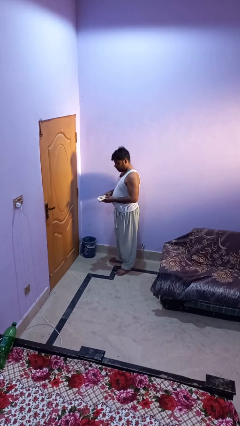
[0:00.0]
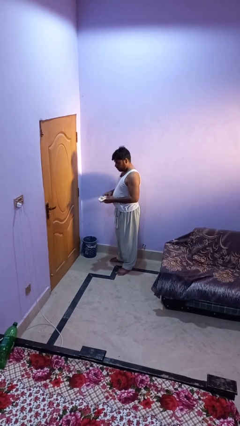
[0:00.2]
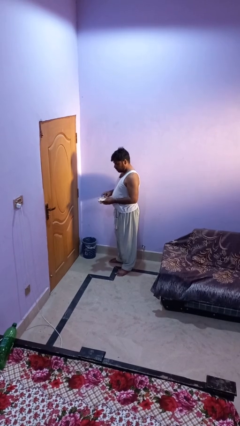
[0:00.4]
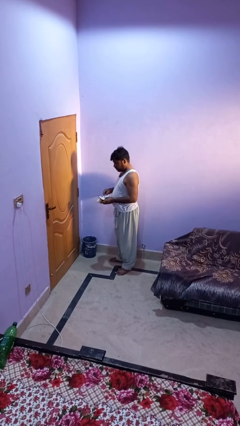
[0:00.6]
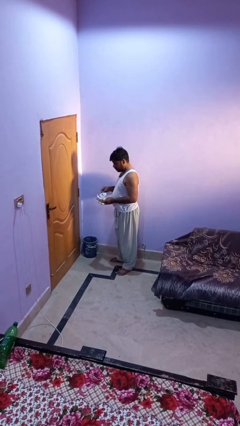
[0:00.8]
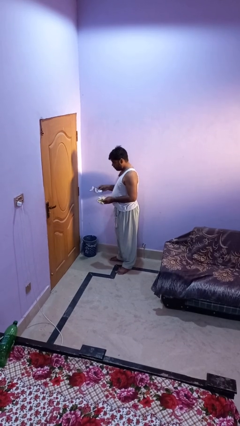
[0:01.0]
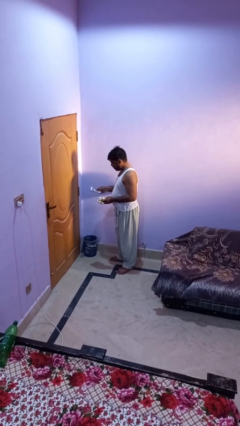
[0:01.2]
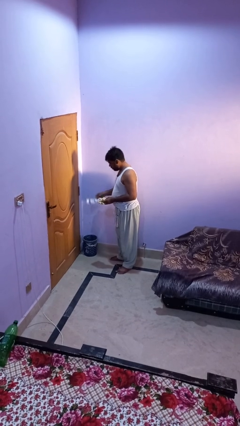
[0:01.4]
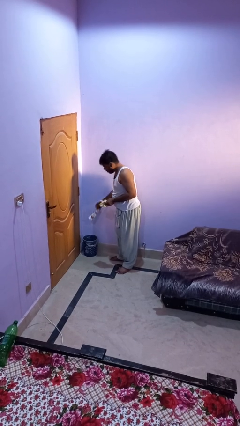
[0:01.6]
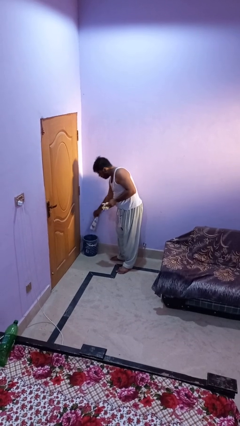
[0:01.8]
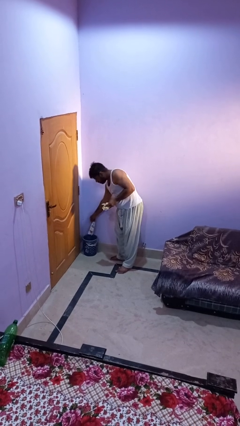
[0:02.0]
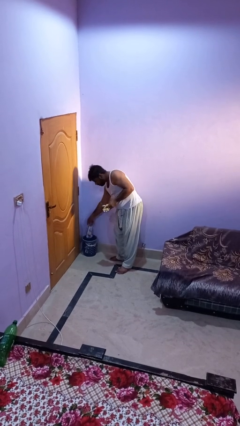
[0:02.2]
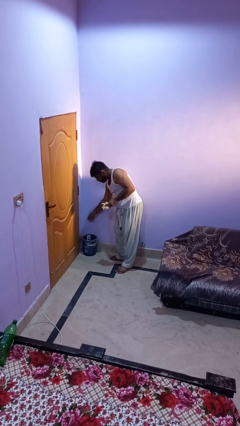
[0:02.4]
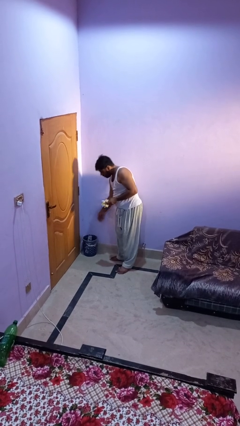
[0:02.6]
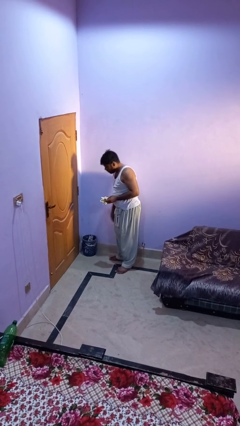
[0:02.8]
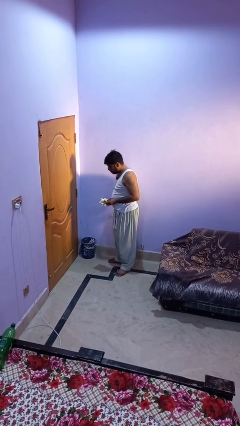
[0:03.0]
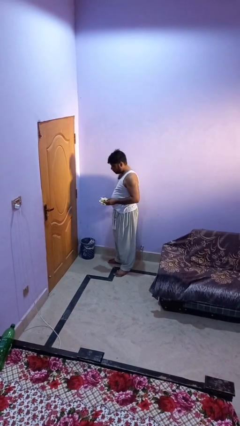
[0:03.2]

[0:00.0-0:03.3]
person discards trash

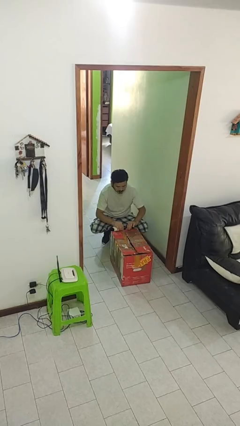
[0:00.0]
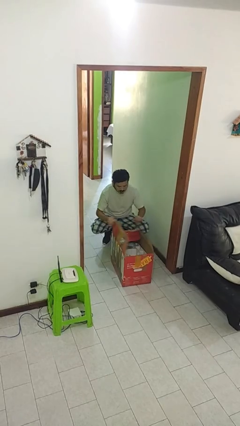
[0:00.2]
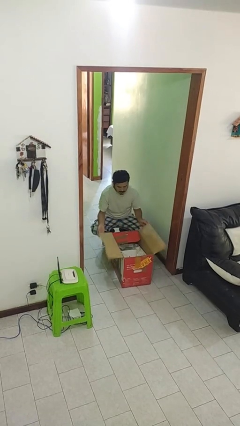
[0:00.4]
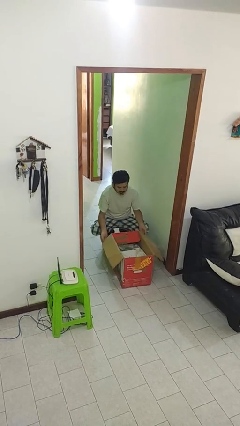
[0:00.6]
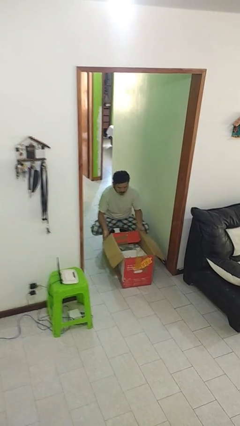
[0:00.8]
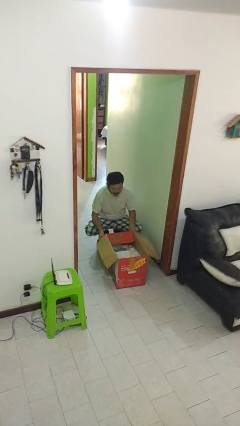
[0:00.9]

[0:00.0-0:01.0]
person opens box

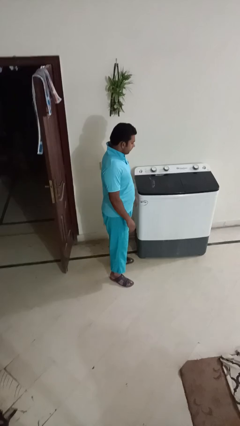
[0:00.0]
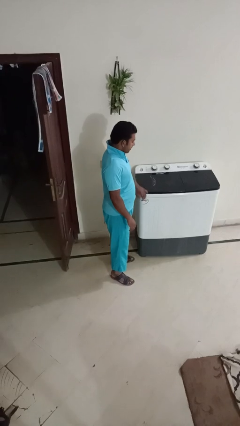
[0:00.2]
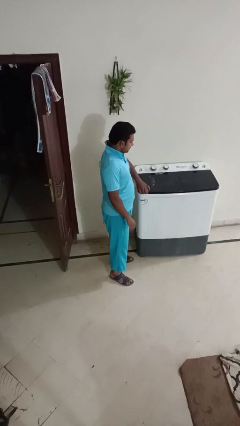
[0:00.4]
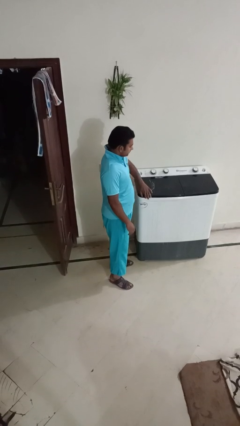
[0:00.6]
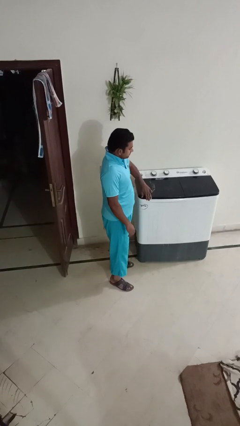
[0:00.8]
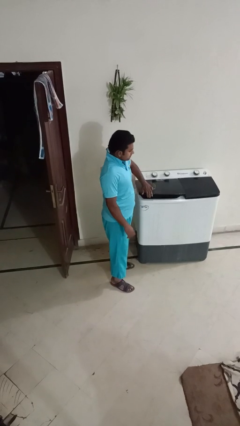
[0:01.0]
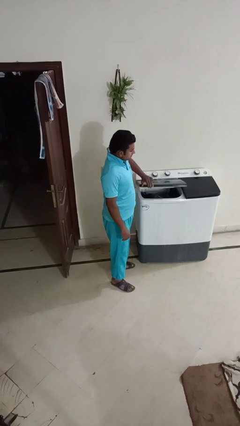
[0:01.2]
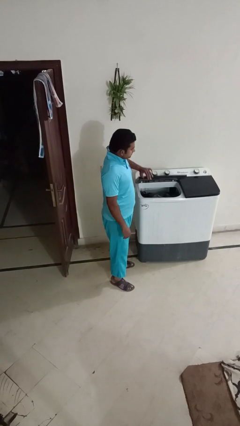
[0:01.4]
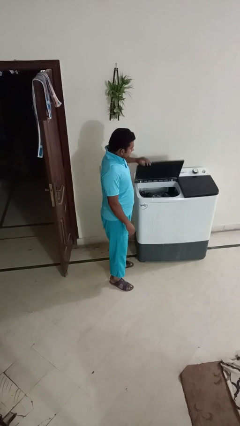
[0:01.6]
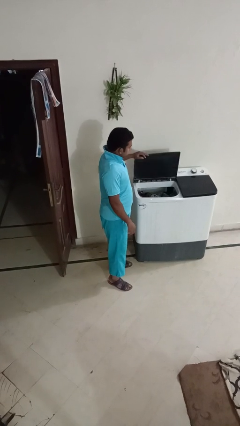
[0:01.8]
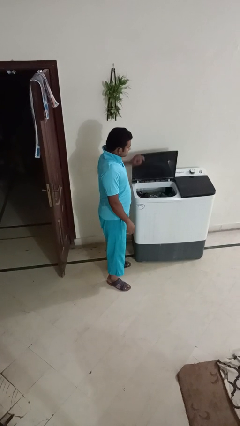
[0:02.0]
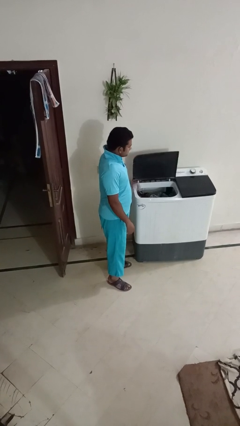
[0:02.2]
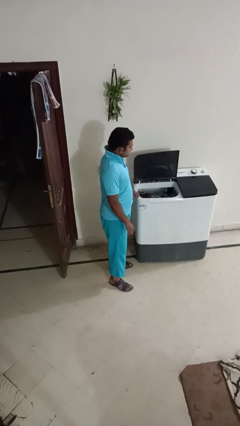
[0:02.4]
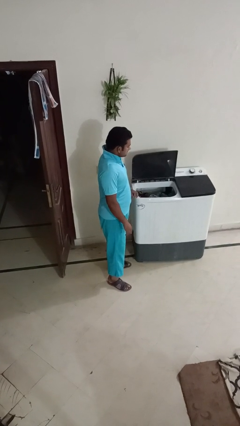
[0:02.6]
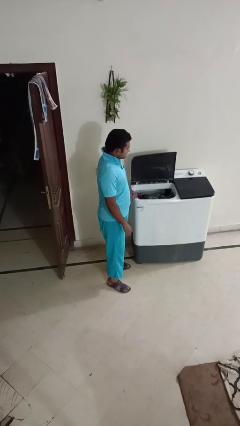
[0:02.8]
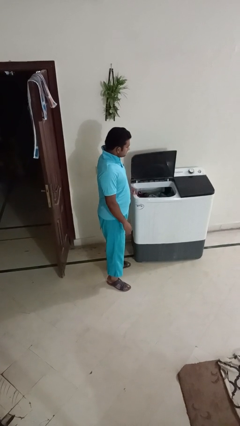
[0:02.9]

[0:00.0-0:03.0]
person opens clothes washer

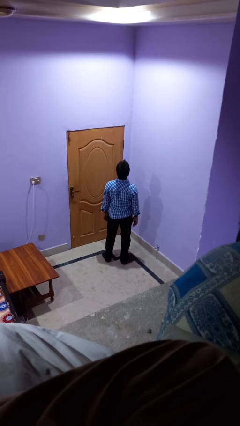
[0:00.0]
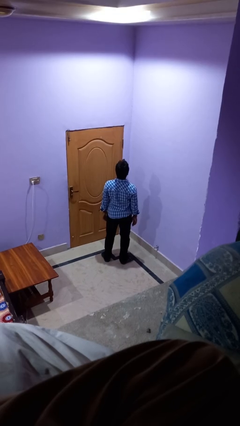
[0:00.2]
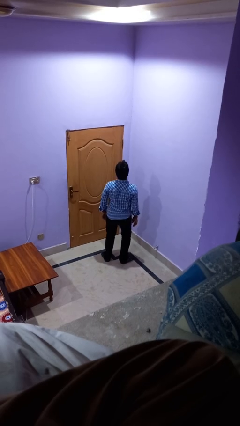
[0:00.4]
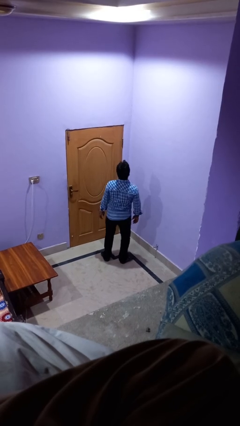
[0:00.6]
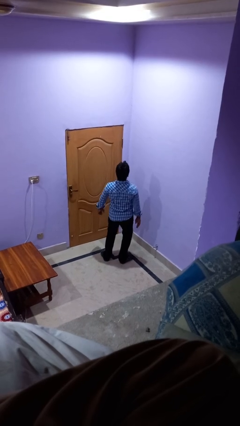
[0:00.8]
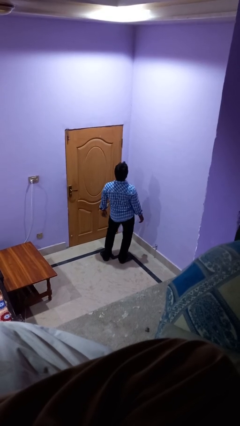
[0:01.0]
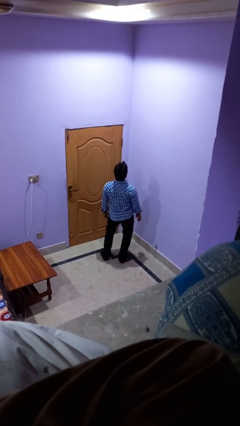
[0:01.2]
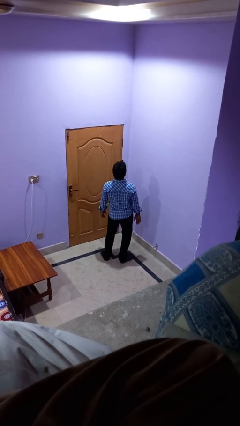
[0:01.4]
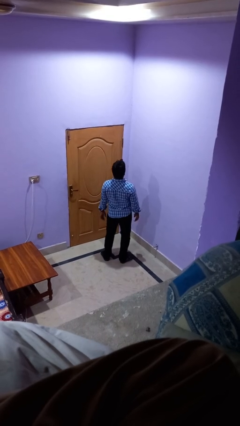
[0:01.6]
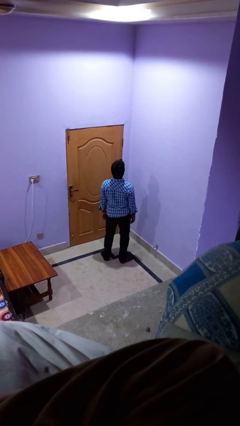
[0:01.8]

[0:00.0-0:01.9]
person wiggles hips

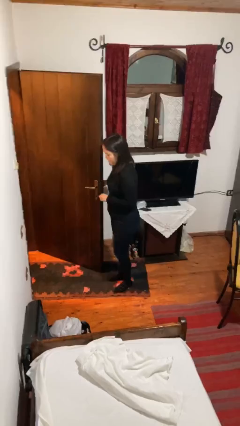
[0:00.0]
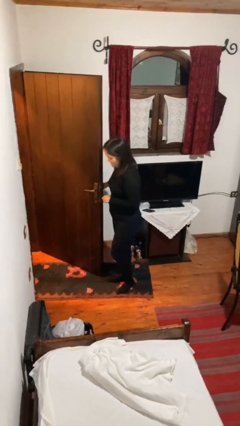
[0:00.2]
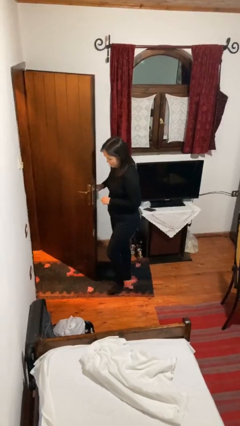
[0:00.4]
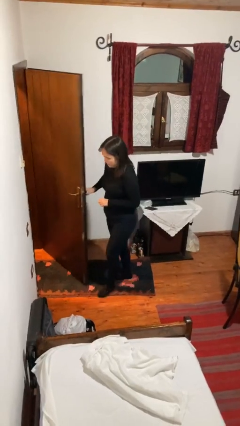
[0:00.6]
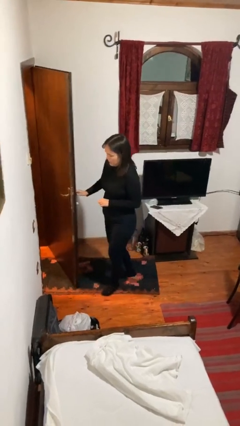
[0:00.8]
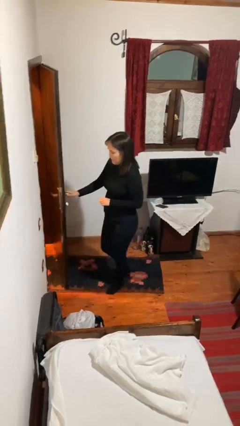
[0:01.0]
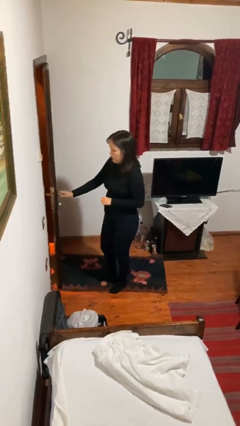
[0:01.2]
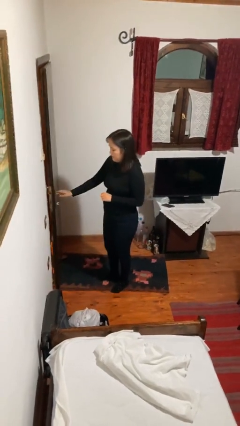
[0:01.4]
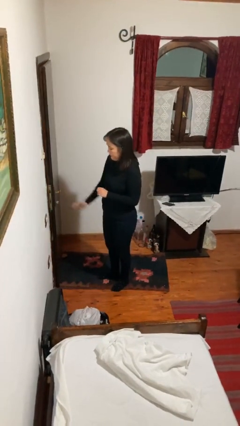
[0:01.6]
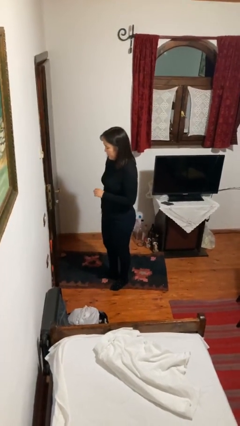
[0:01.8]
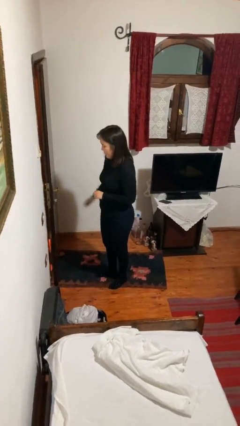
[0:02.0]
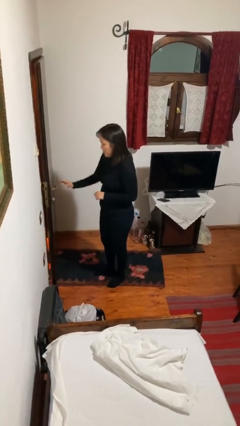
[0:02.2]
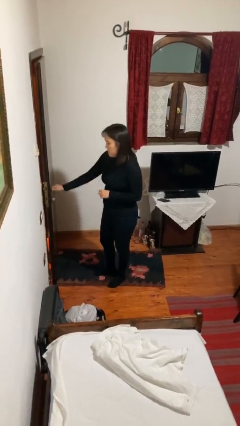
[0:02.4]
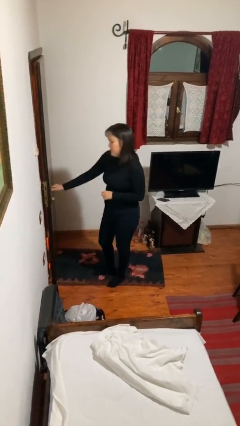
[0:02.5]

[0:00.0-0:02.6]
person closes facility door

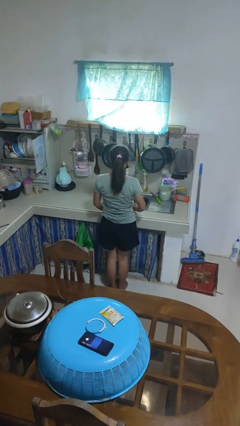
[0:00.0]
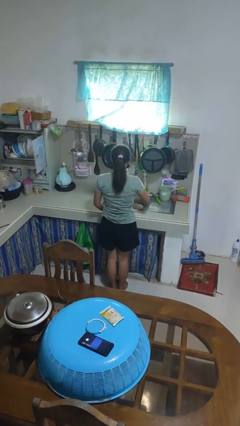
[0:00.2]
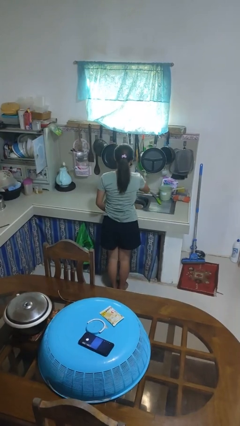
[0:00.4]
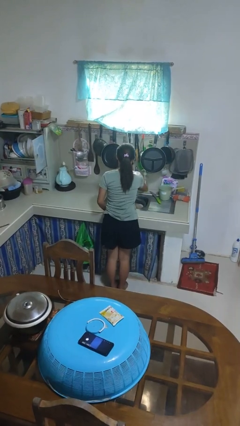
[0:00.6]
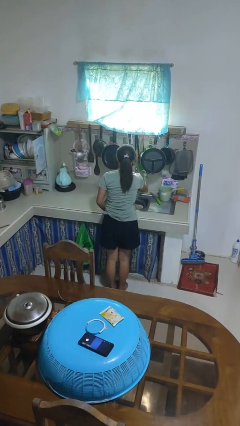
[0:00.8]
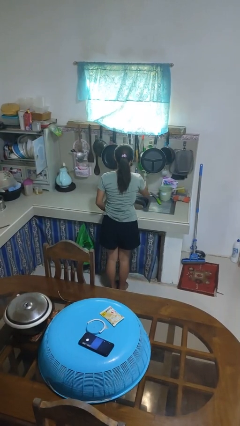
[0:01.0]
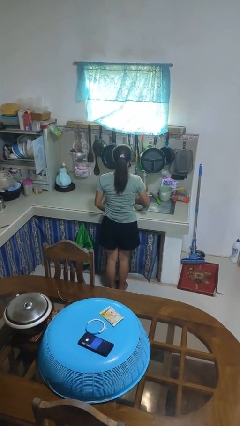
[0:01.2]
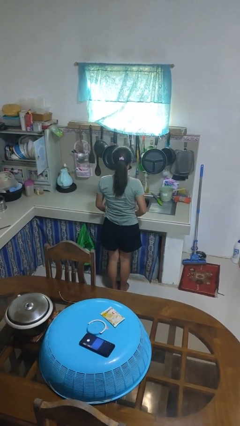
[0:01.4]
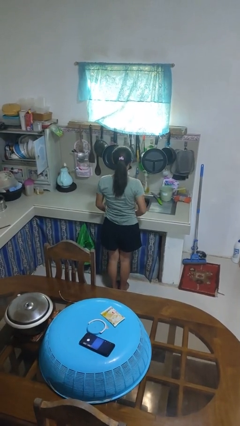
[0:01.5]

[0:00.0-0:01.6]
person turns off faucet

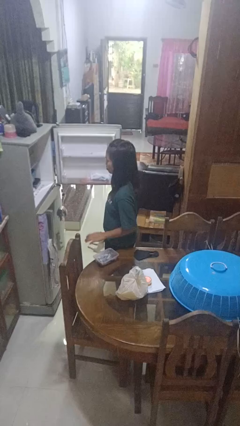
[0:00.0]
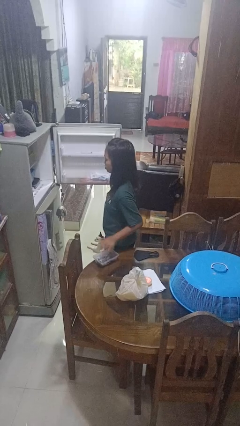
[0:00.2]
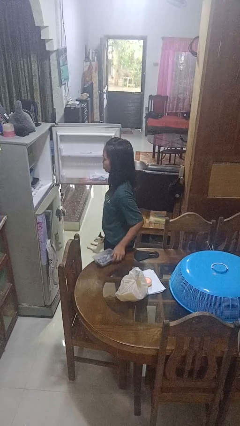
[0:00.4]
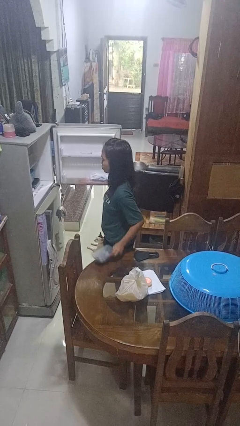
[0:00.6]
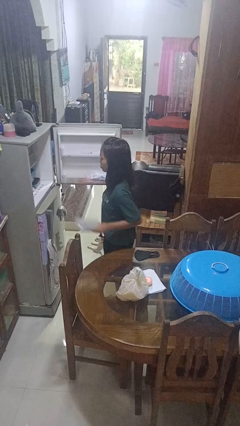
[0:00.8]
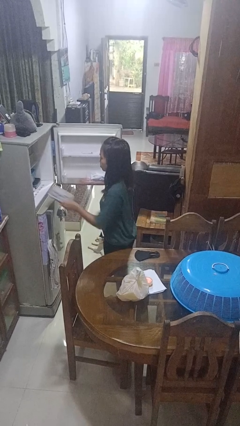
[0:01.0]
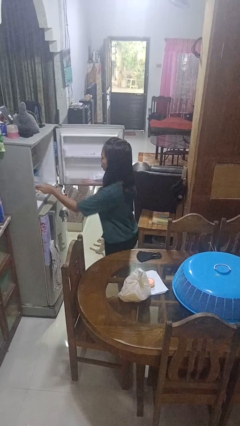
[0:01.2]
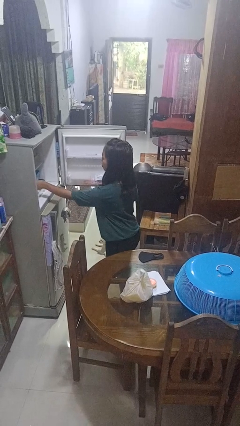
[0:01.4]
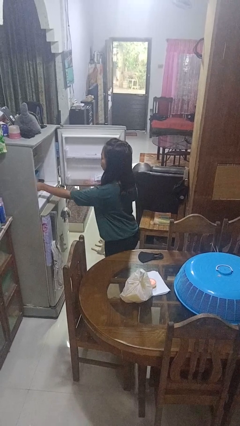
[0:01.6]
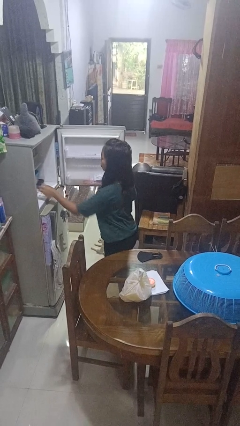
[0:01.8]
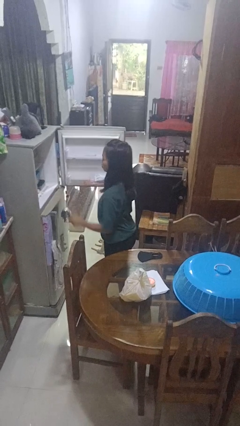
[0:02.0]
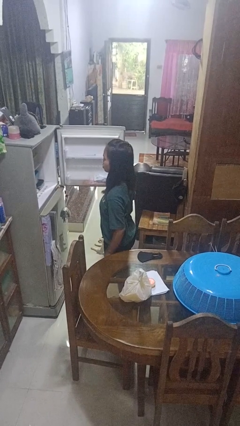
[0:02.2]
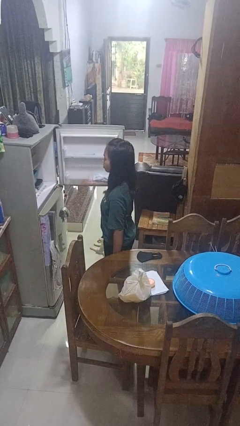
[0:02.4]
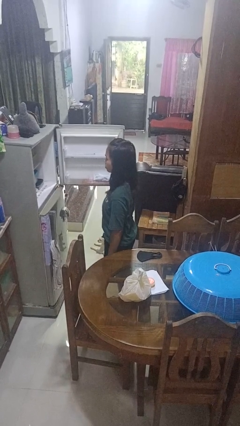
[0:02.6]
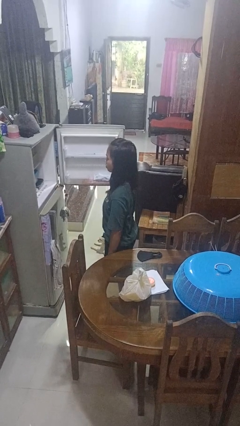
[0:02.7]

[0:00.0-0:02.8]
person puts object into refrigerator

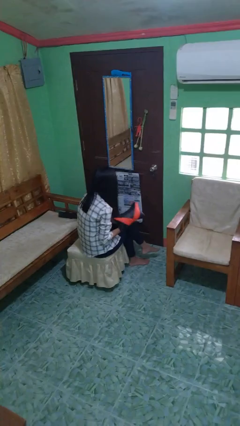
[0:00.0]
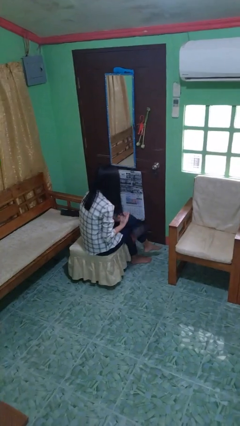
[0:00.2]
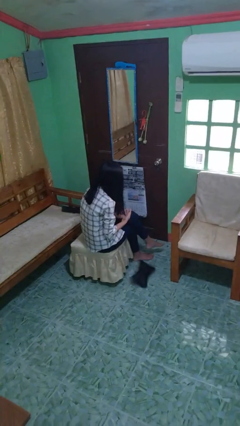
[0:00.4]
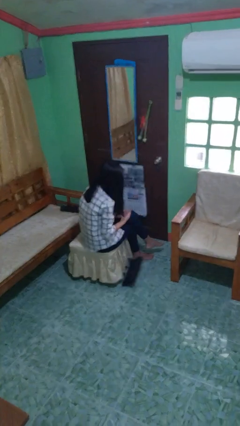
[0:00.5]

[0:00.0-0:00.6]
person drops object

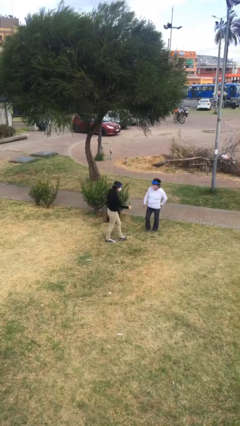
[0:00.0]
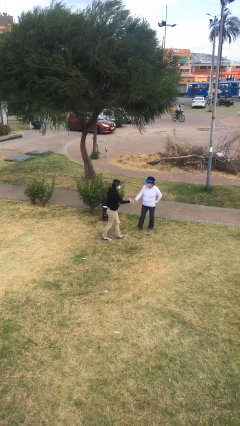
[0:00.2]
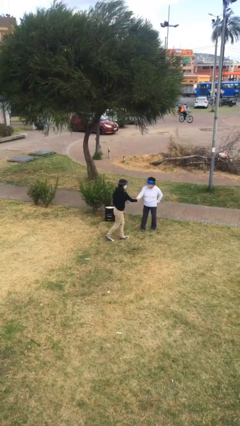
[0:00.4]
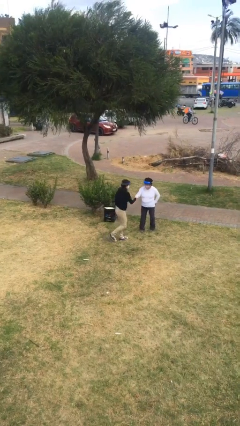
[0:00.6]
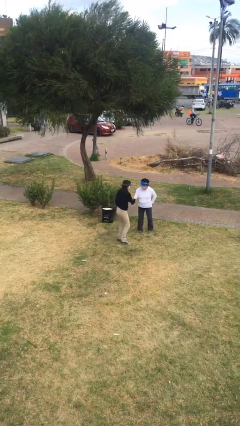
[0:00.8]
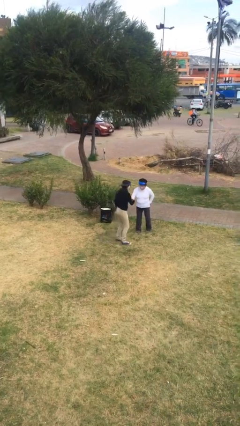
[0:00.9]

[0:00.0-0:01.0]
person shakes hand
